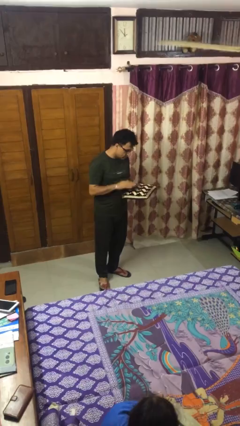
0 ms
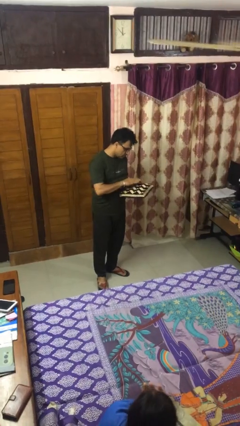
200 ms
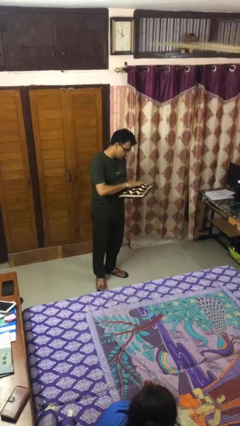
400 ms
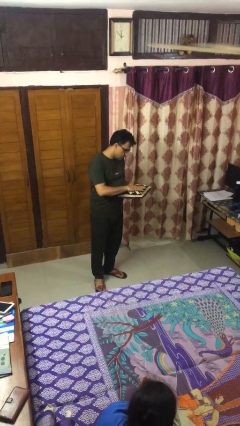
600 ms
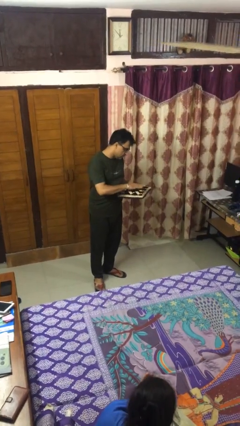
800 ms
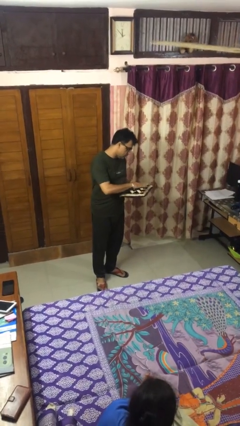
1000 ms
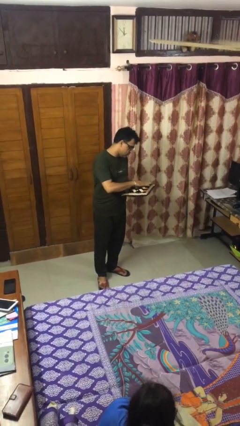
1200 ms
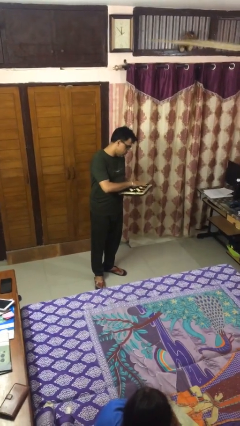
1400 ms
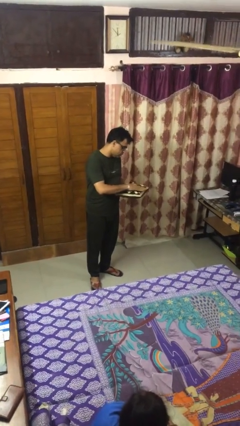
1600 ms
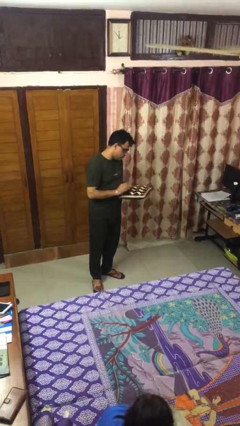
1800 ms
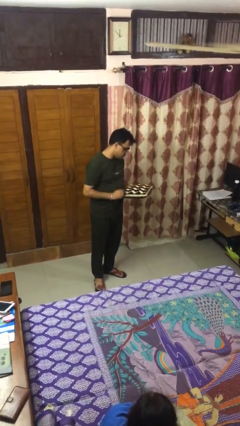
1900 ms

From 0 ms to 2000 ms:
person waves hand over object

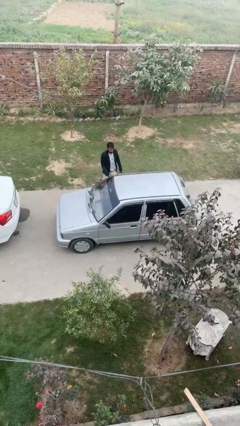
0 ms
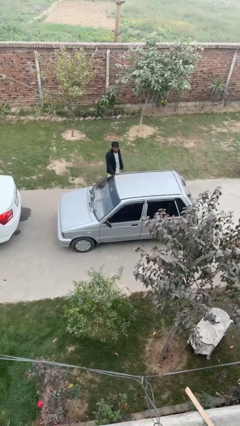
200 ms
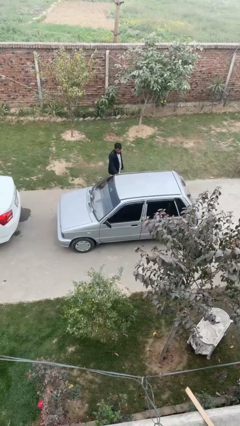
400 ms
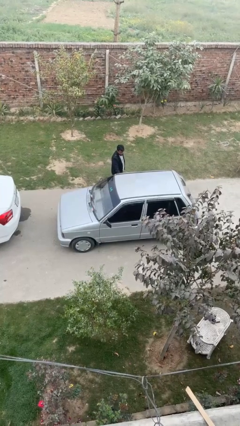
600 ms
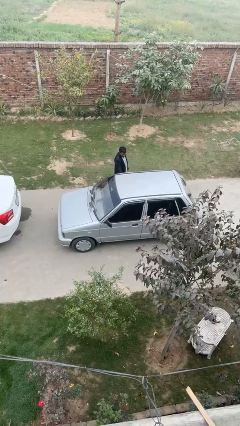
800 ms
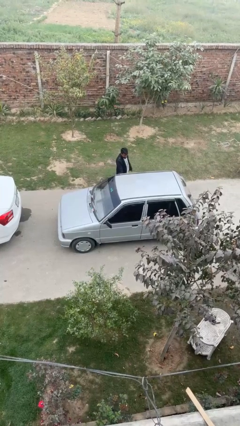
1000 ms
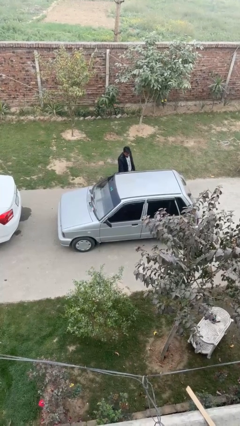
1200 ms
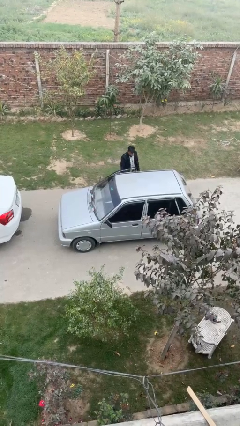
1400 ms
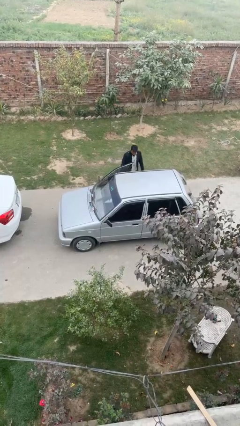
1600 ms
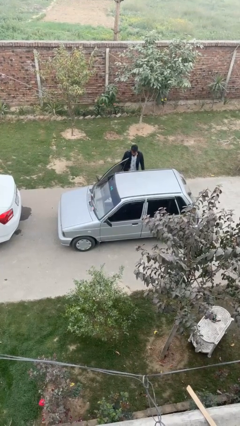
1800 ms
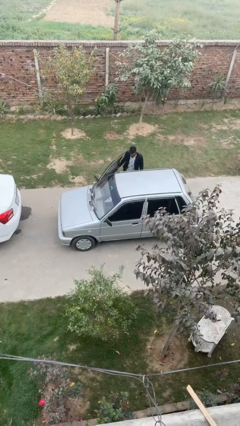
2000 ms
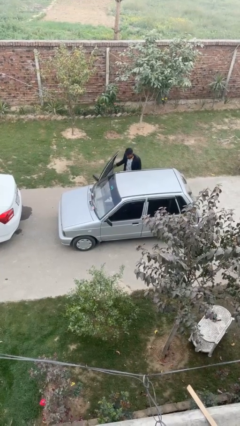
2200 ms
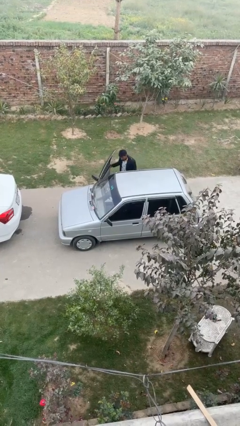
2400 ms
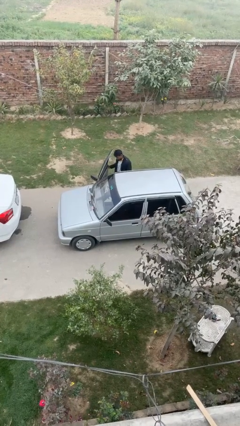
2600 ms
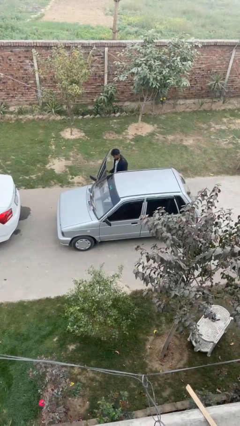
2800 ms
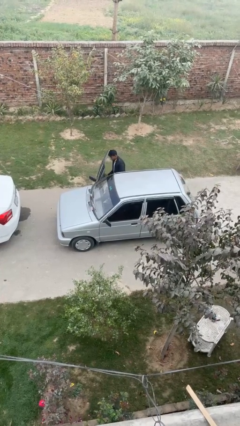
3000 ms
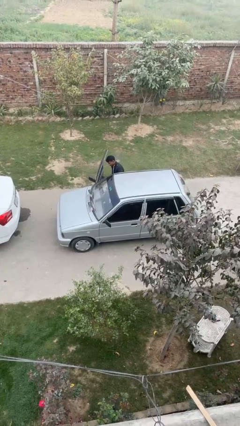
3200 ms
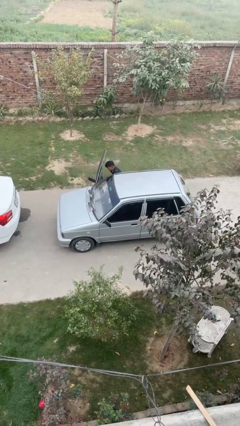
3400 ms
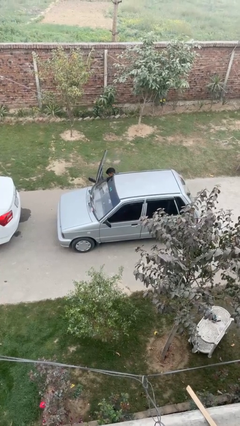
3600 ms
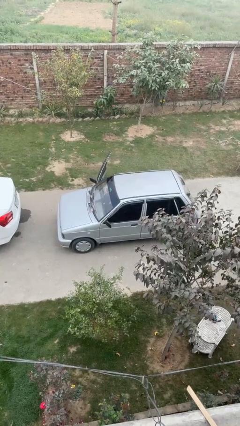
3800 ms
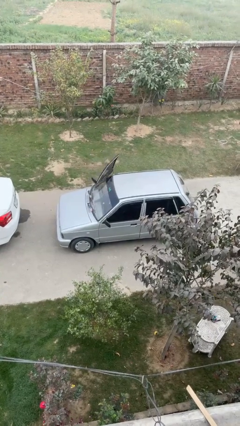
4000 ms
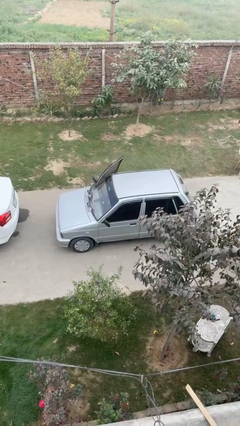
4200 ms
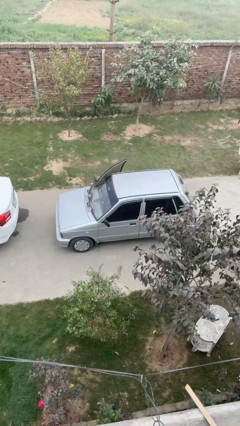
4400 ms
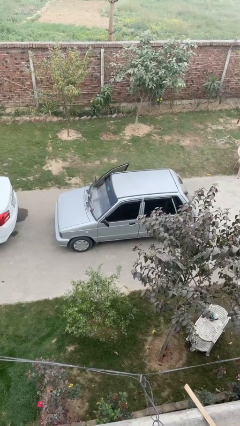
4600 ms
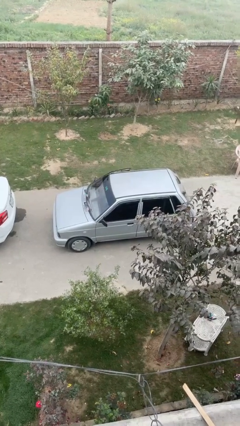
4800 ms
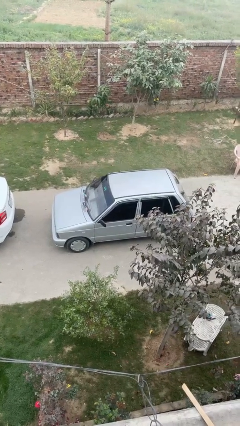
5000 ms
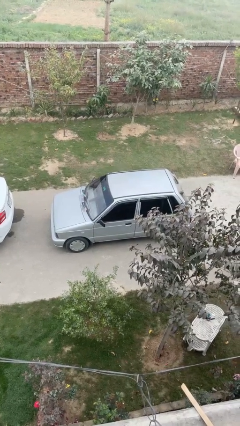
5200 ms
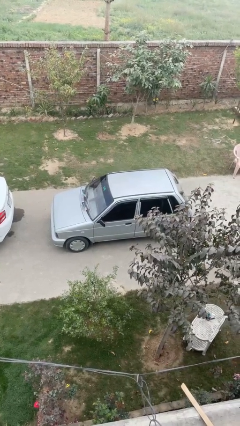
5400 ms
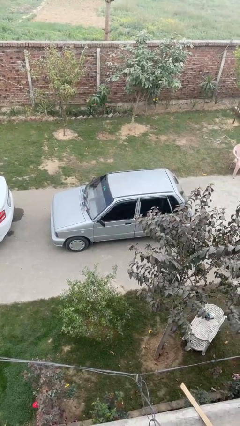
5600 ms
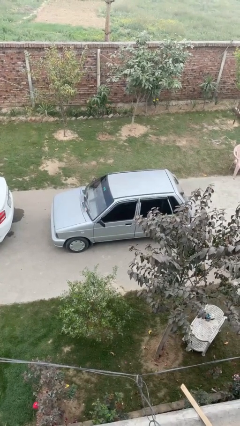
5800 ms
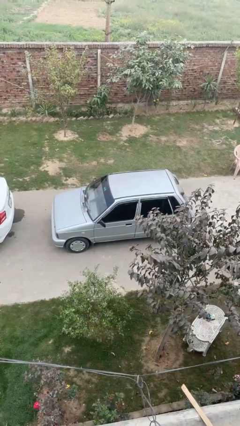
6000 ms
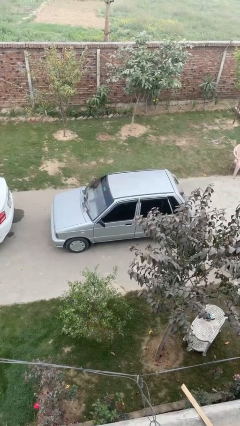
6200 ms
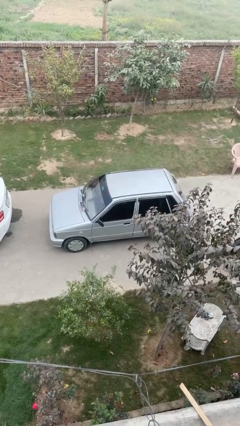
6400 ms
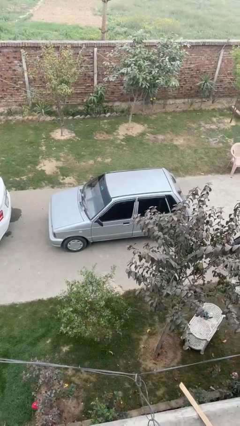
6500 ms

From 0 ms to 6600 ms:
car picks up person

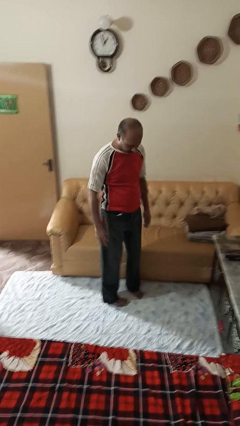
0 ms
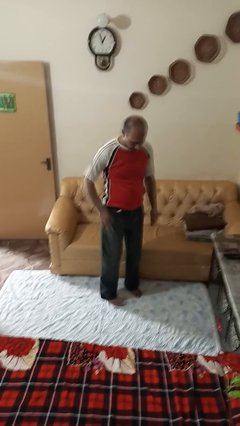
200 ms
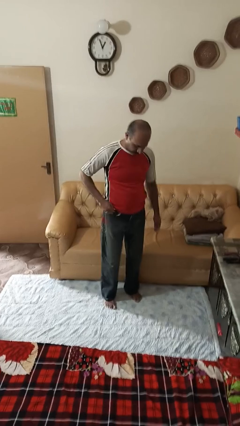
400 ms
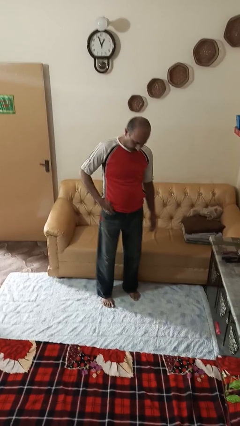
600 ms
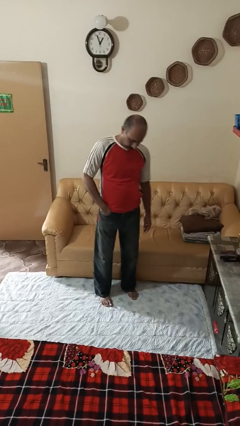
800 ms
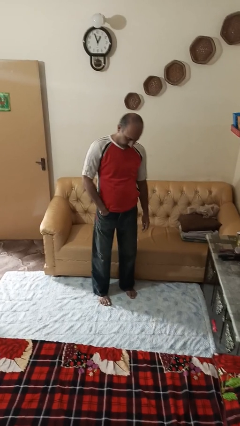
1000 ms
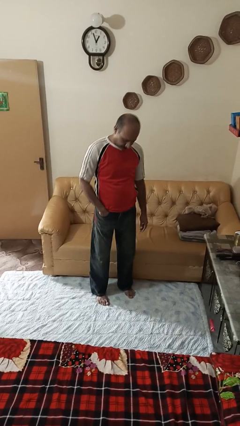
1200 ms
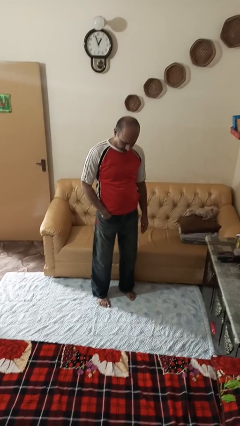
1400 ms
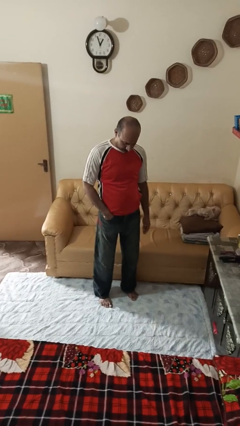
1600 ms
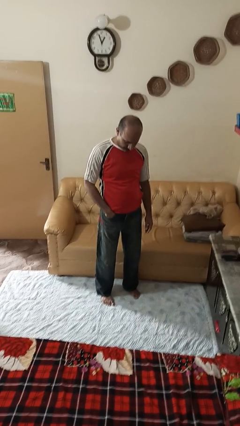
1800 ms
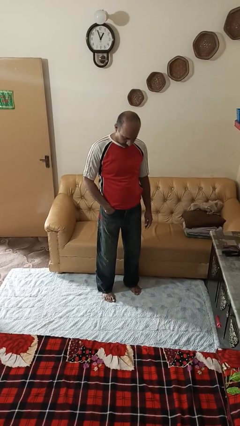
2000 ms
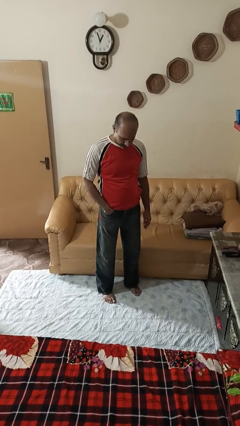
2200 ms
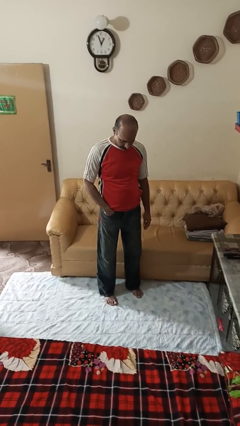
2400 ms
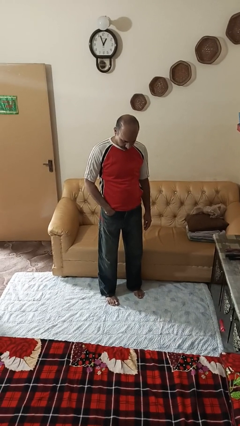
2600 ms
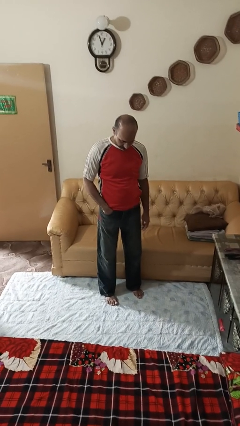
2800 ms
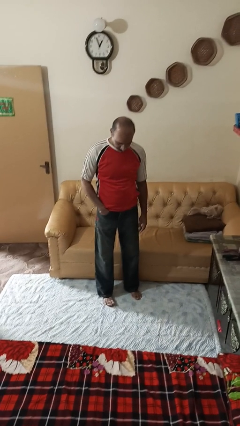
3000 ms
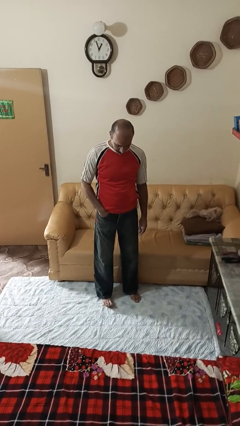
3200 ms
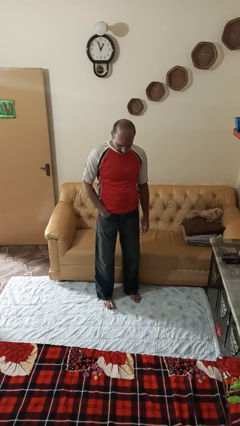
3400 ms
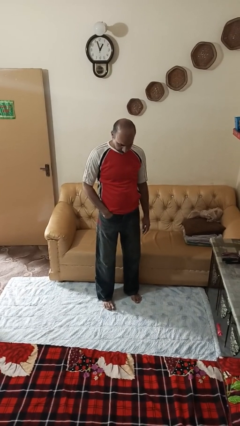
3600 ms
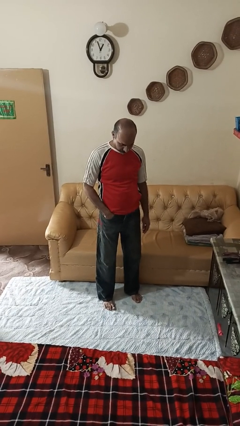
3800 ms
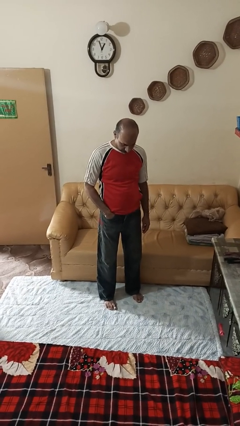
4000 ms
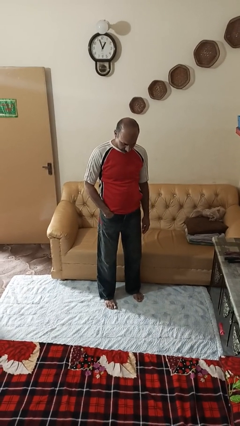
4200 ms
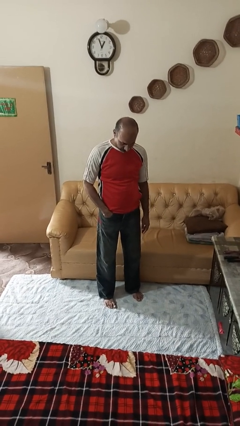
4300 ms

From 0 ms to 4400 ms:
person puts hands in back pockets

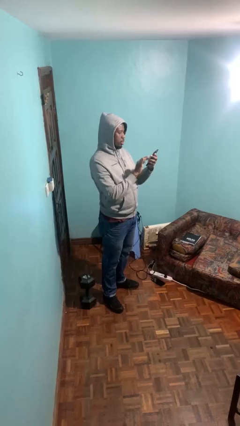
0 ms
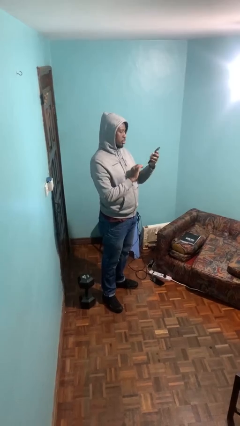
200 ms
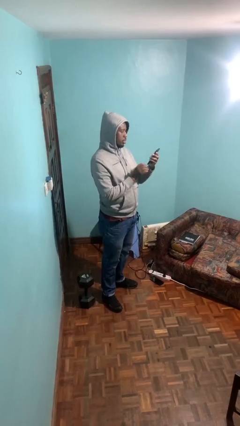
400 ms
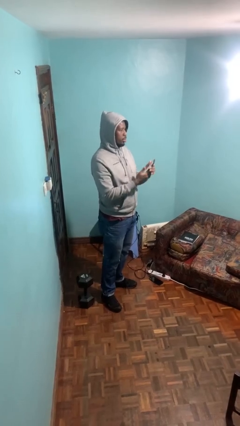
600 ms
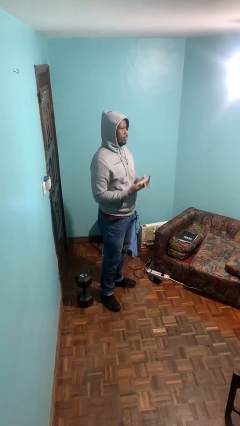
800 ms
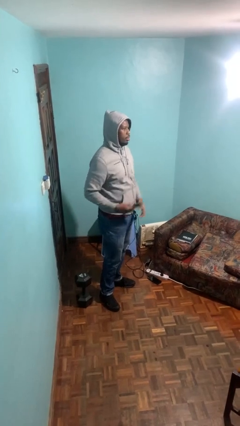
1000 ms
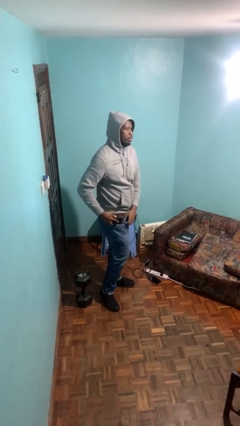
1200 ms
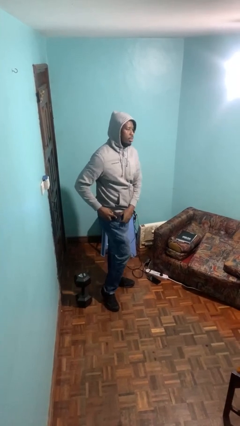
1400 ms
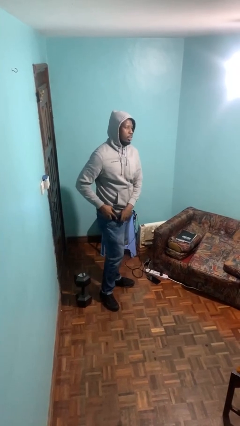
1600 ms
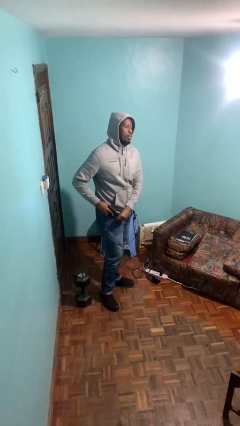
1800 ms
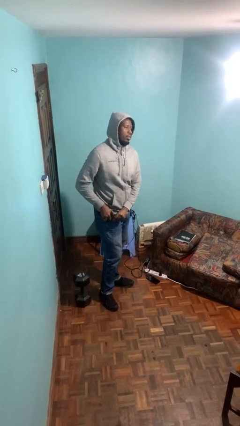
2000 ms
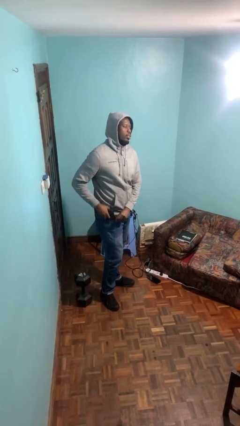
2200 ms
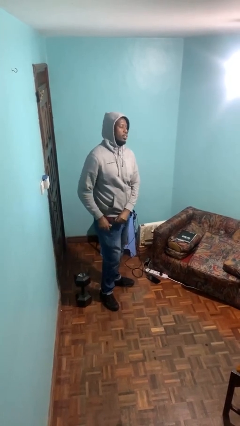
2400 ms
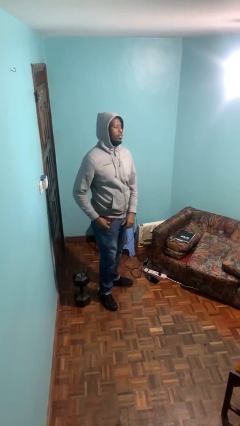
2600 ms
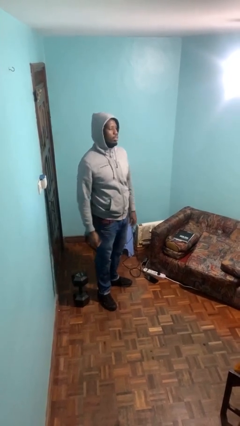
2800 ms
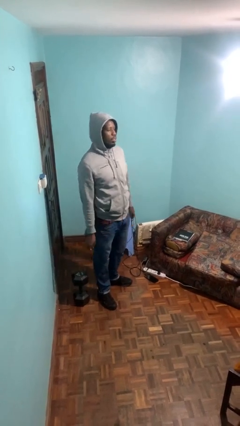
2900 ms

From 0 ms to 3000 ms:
person puts phone into pocket

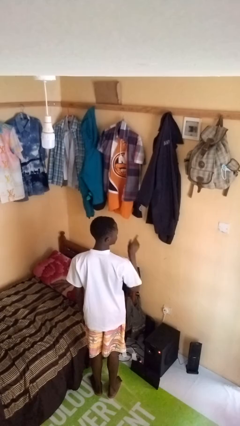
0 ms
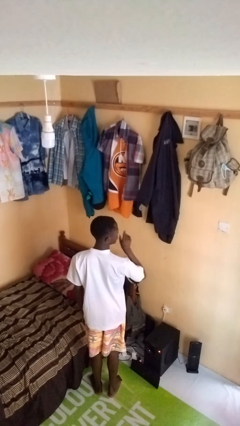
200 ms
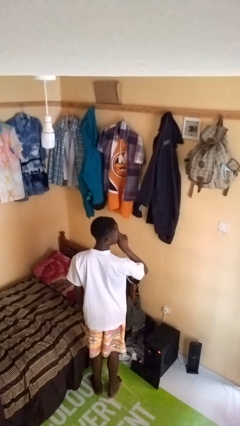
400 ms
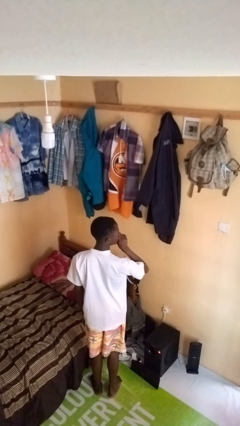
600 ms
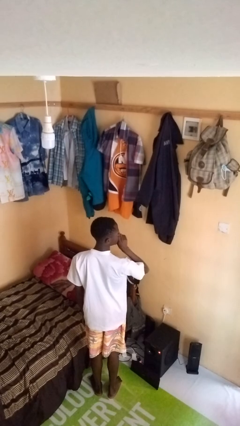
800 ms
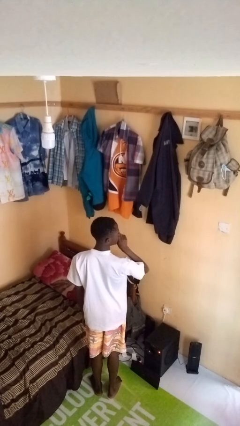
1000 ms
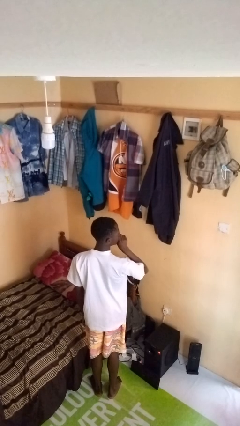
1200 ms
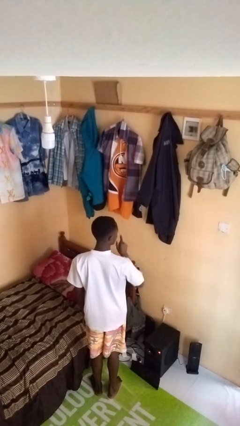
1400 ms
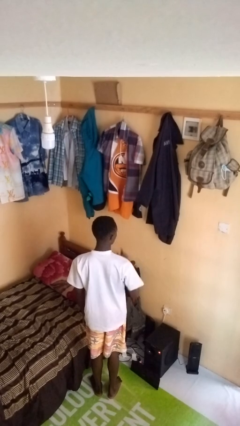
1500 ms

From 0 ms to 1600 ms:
person gestures be quiet
